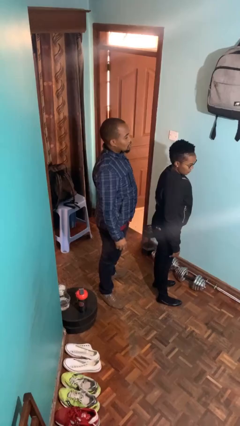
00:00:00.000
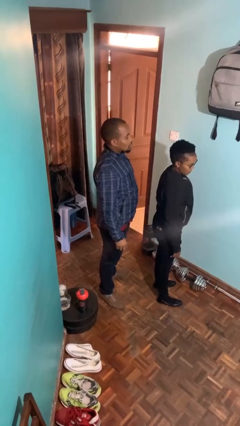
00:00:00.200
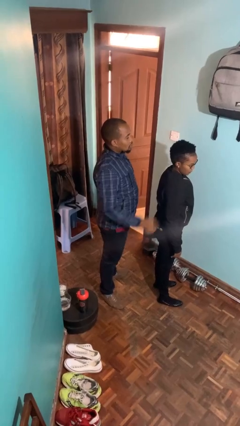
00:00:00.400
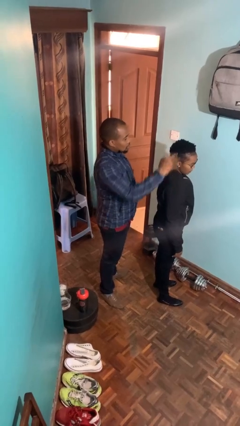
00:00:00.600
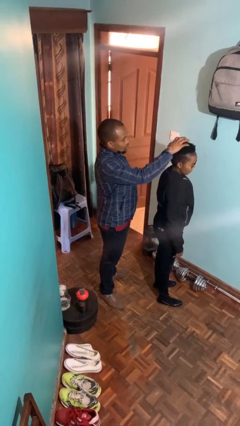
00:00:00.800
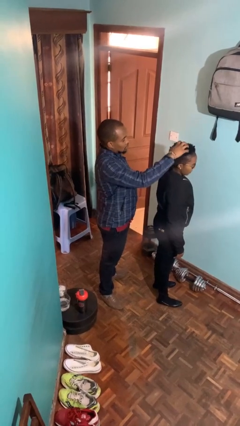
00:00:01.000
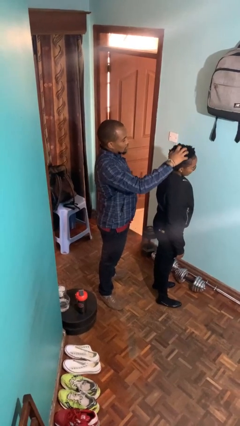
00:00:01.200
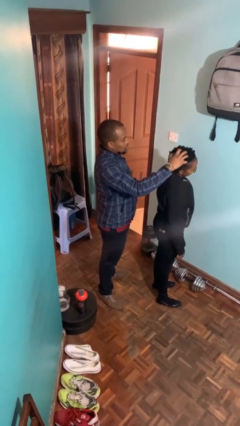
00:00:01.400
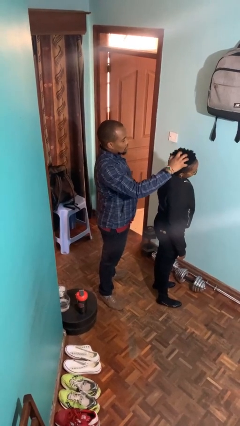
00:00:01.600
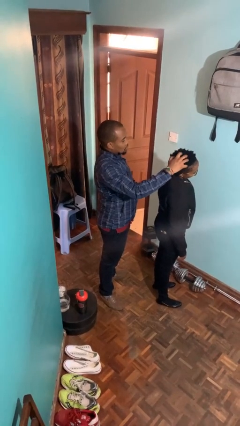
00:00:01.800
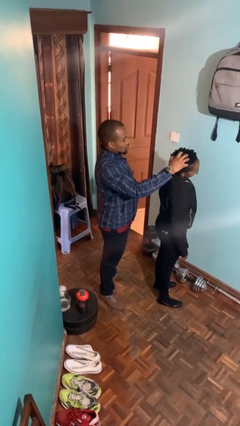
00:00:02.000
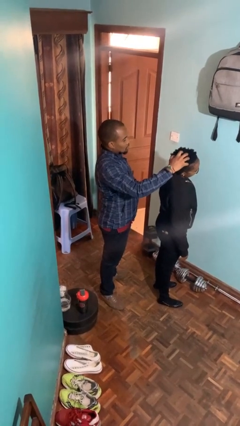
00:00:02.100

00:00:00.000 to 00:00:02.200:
person grabs person by hair

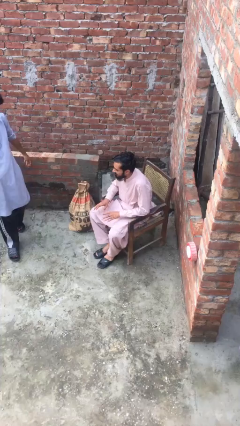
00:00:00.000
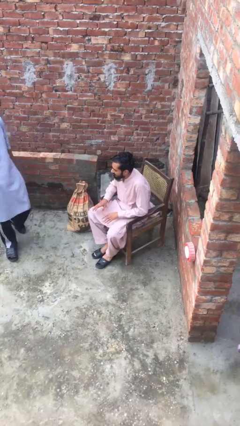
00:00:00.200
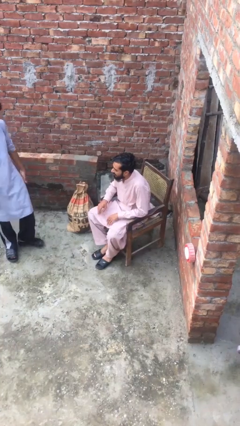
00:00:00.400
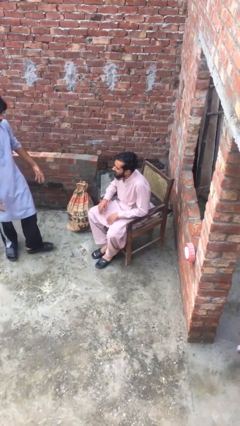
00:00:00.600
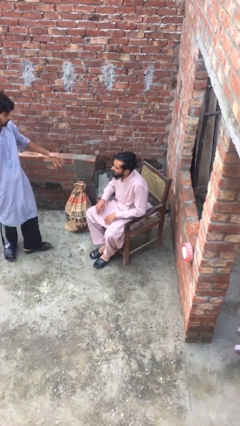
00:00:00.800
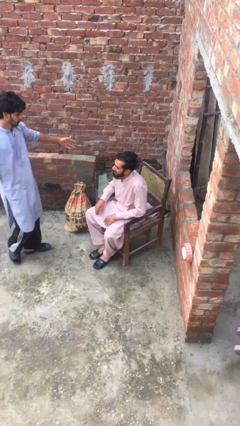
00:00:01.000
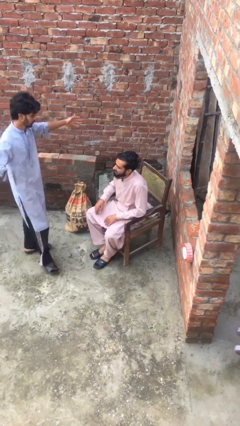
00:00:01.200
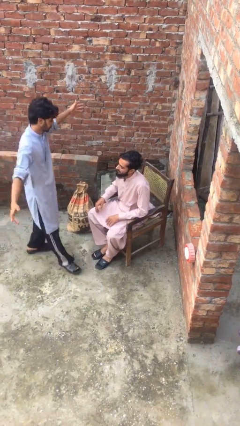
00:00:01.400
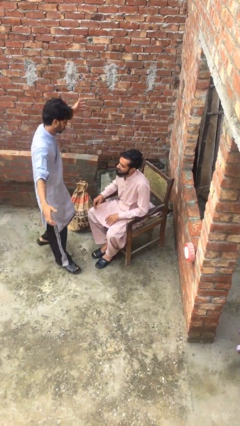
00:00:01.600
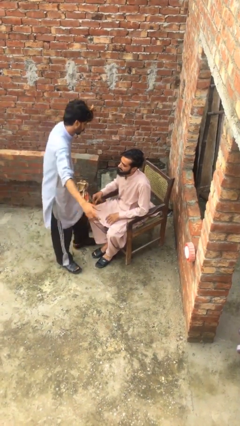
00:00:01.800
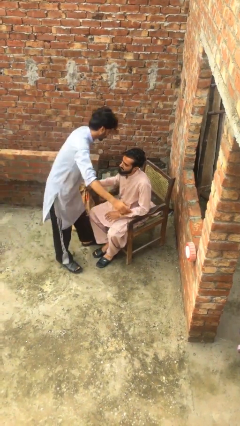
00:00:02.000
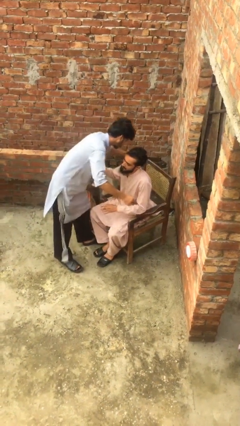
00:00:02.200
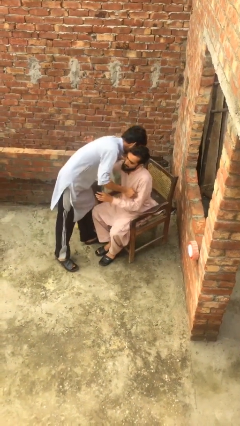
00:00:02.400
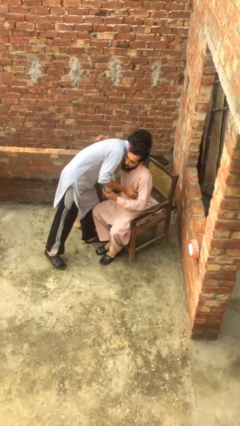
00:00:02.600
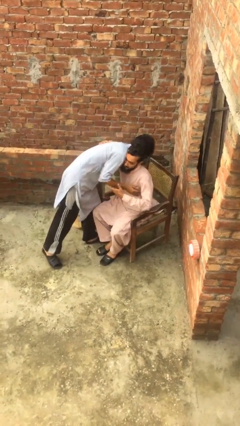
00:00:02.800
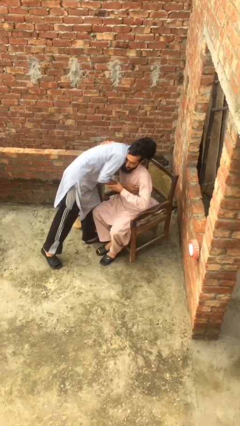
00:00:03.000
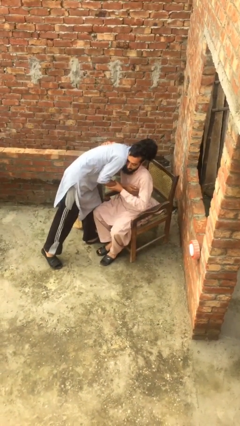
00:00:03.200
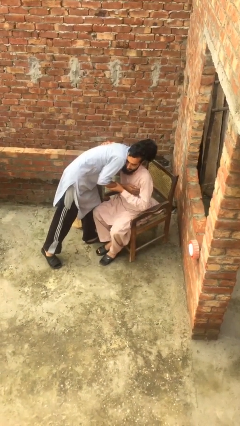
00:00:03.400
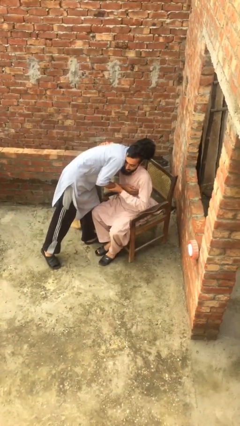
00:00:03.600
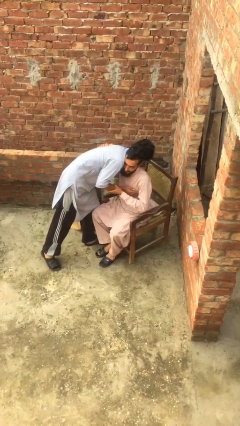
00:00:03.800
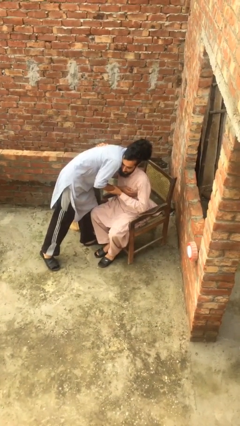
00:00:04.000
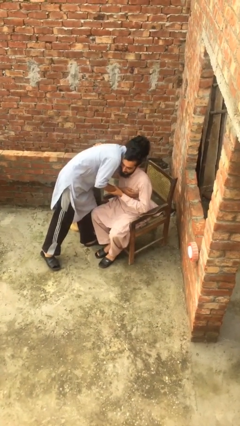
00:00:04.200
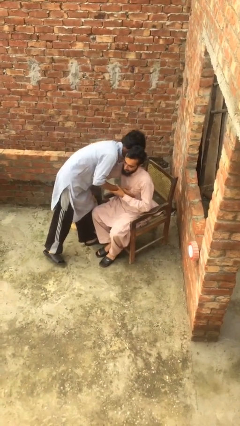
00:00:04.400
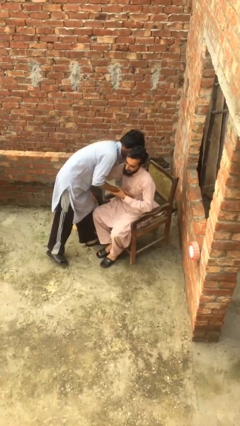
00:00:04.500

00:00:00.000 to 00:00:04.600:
person embraces person

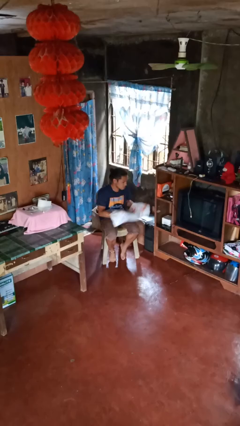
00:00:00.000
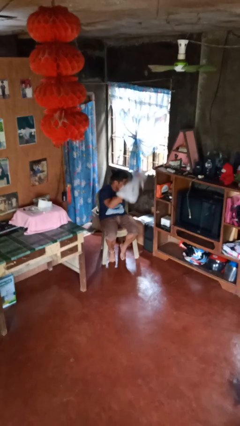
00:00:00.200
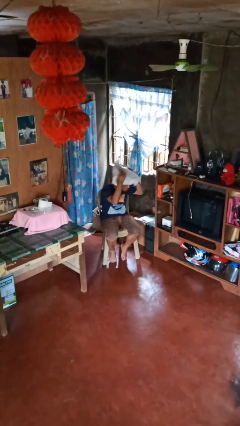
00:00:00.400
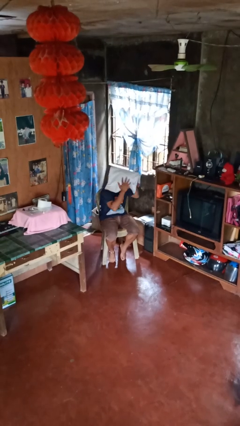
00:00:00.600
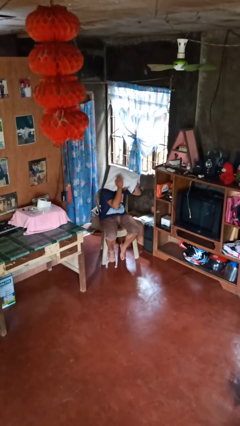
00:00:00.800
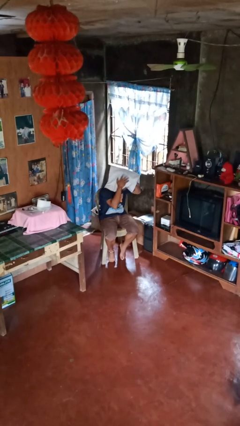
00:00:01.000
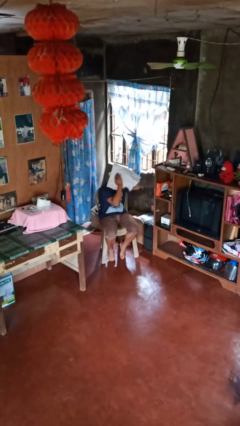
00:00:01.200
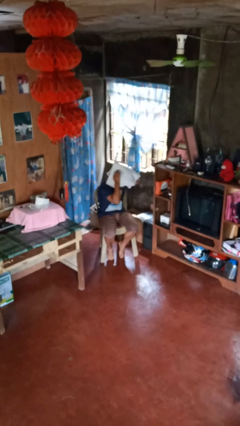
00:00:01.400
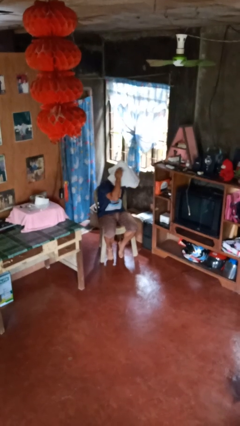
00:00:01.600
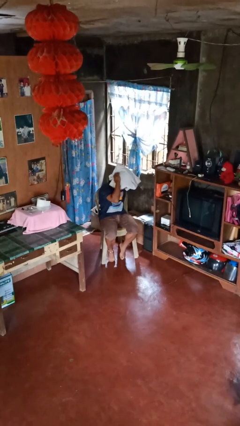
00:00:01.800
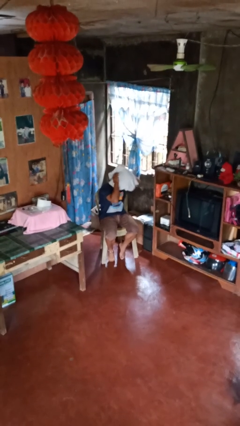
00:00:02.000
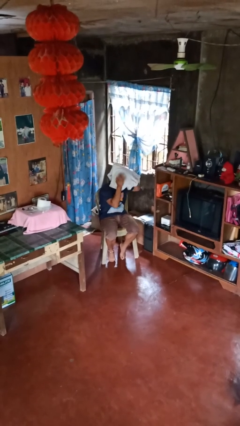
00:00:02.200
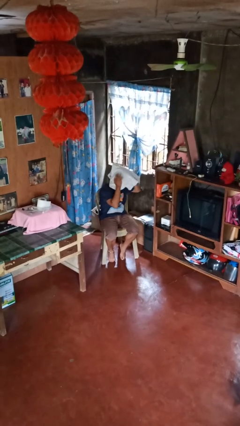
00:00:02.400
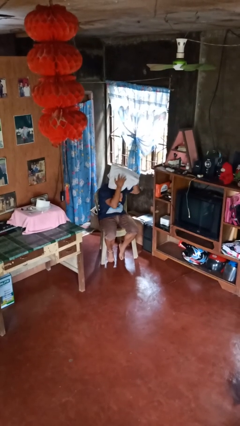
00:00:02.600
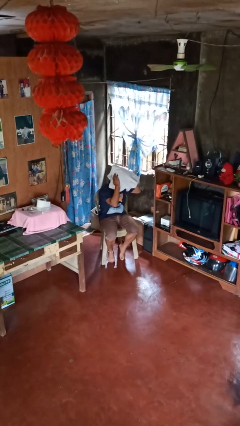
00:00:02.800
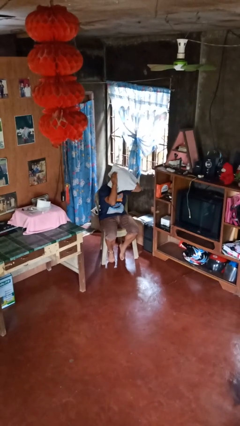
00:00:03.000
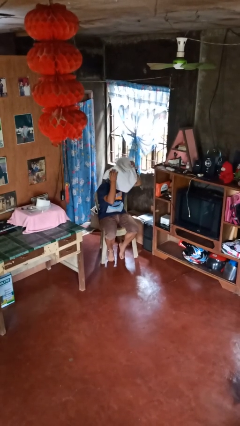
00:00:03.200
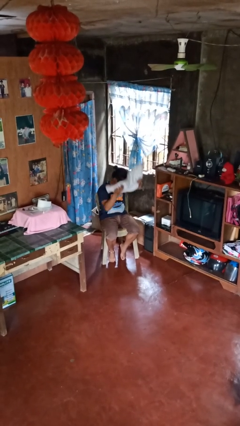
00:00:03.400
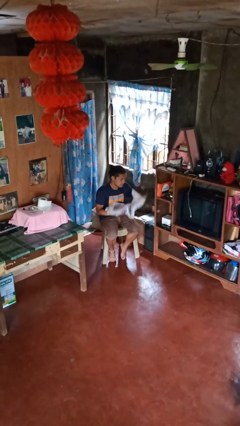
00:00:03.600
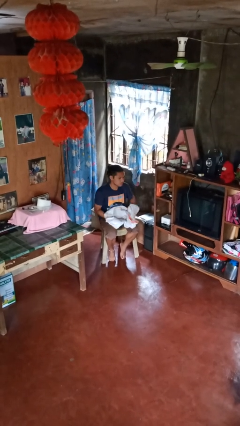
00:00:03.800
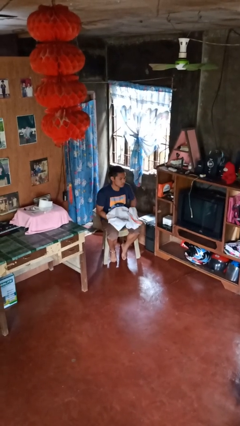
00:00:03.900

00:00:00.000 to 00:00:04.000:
person dries hair with towel

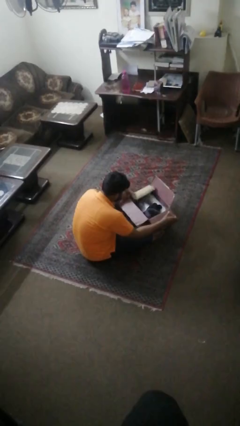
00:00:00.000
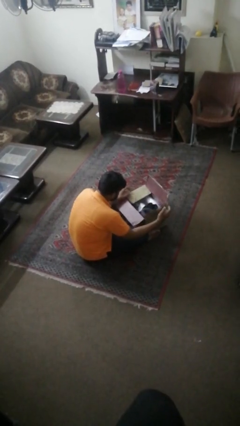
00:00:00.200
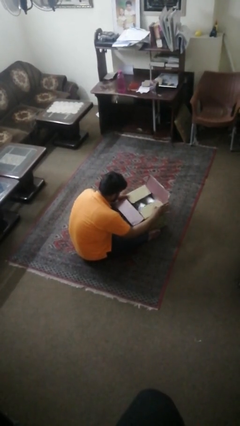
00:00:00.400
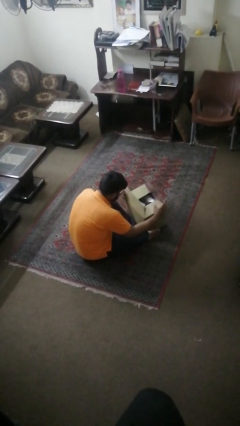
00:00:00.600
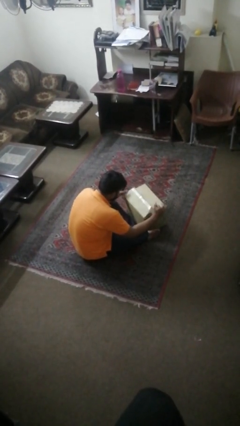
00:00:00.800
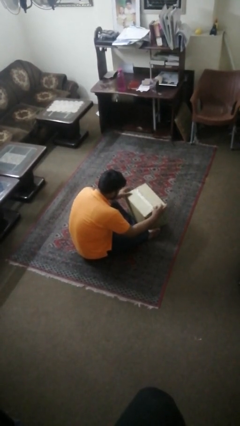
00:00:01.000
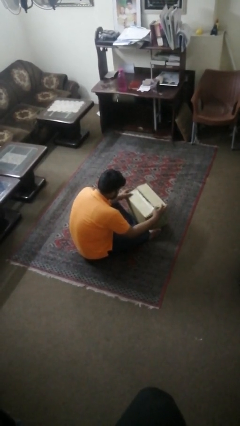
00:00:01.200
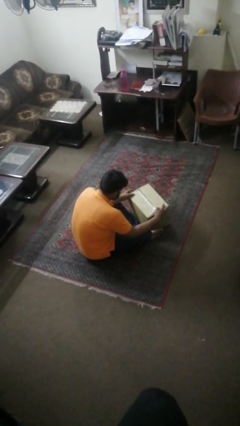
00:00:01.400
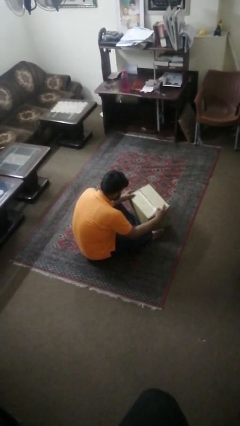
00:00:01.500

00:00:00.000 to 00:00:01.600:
person closes box

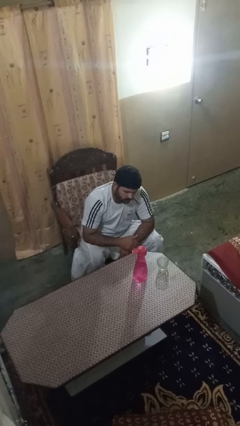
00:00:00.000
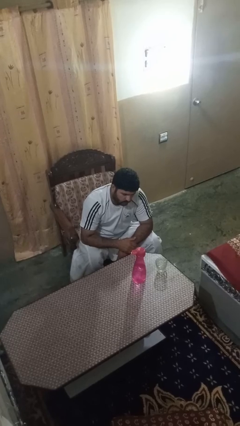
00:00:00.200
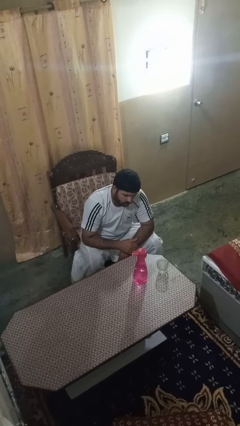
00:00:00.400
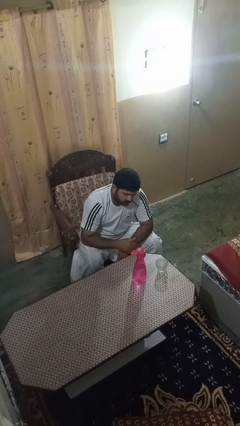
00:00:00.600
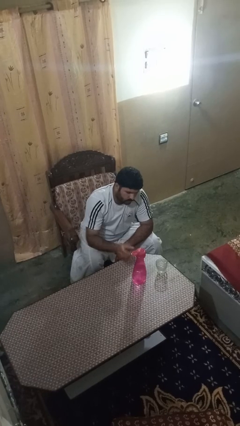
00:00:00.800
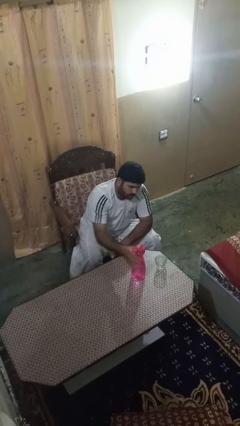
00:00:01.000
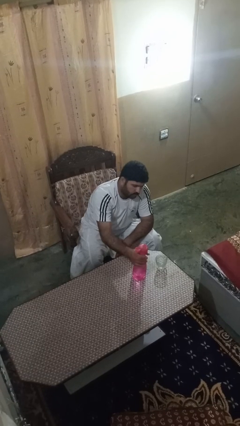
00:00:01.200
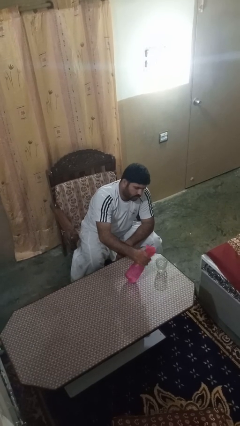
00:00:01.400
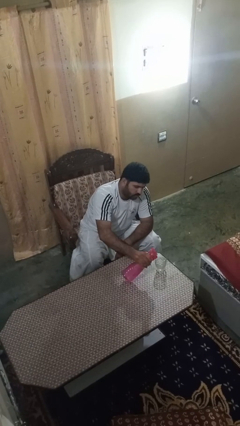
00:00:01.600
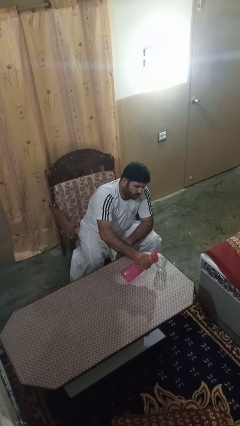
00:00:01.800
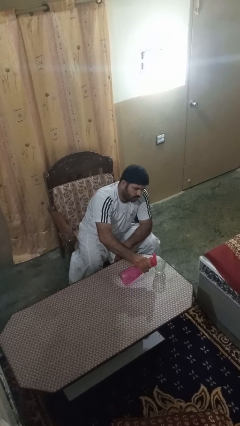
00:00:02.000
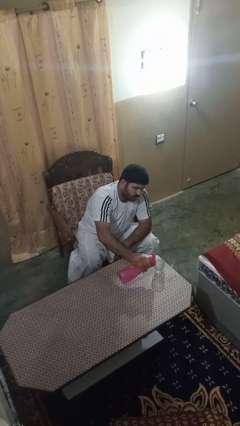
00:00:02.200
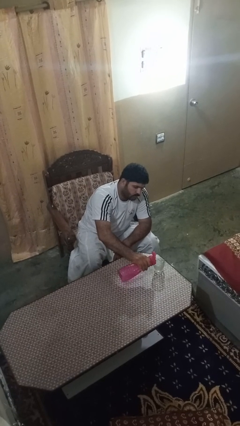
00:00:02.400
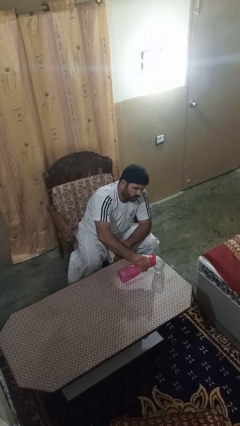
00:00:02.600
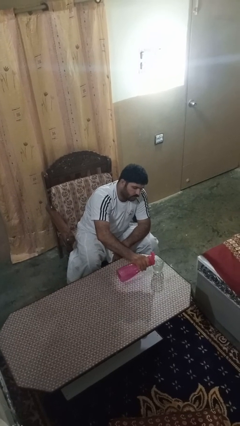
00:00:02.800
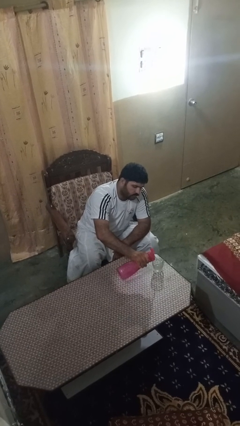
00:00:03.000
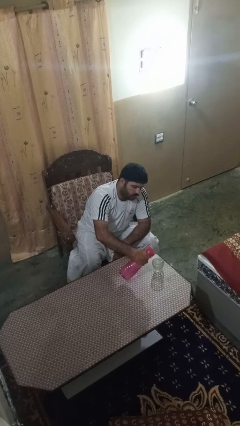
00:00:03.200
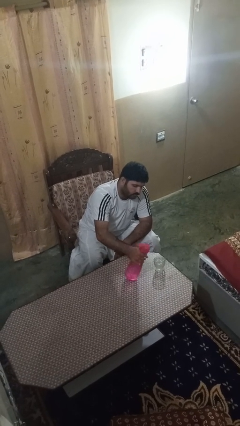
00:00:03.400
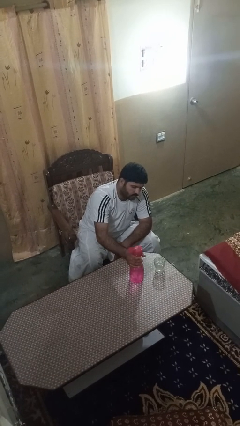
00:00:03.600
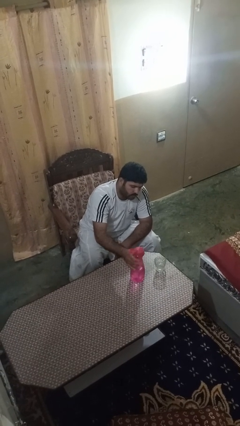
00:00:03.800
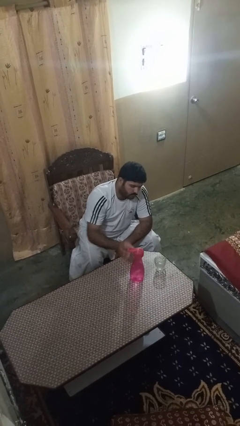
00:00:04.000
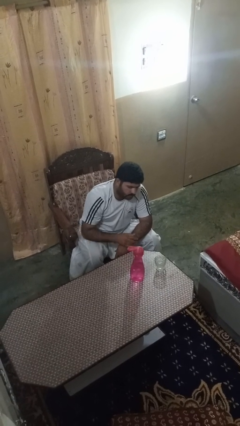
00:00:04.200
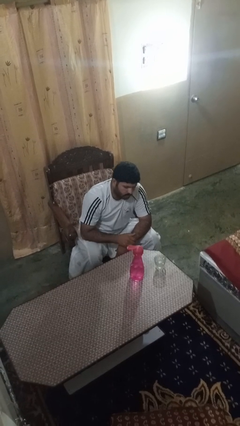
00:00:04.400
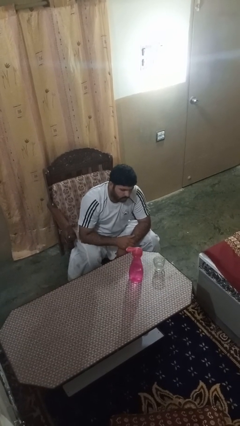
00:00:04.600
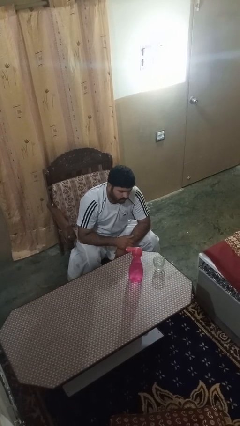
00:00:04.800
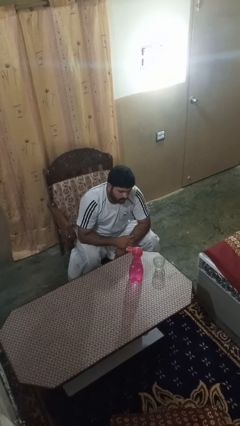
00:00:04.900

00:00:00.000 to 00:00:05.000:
person pours liquid into cup

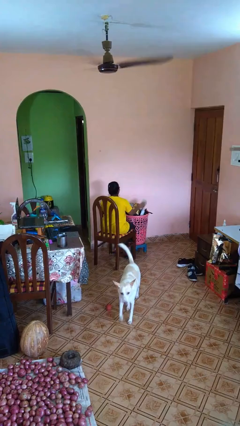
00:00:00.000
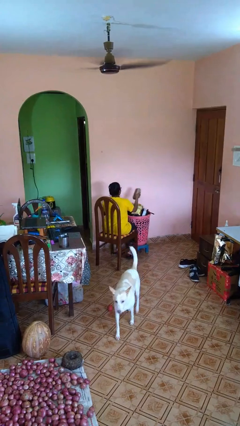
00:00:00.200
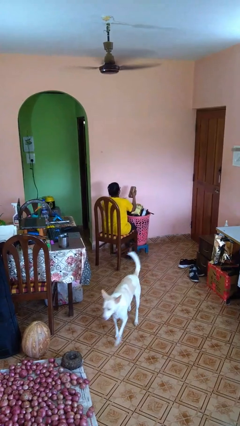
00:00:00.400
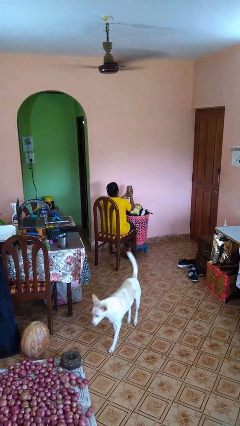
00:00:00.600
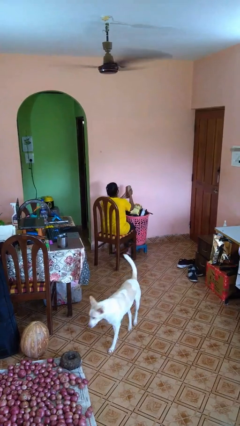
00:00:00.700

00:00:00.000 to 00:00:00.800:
person takes object from basket
